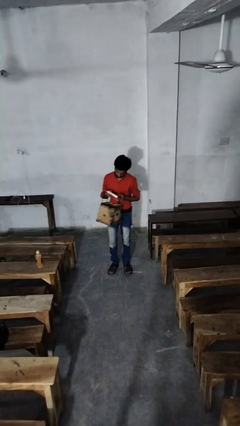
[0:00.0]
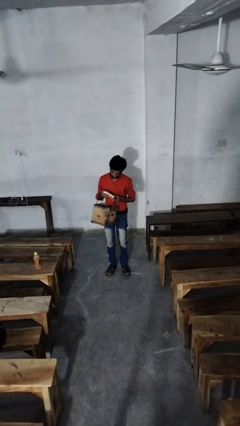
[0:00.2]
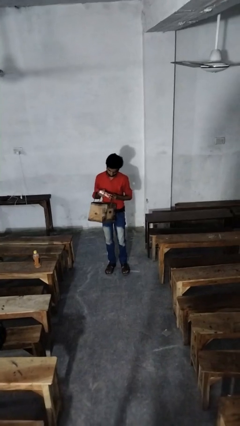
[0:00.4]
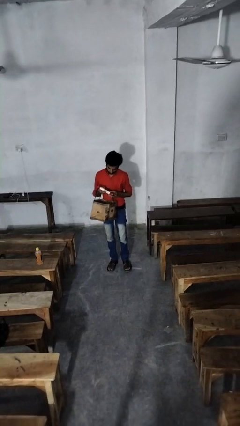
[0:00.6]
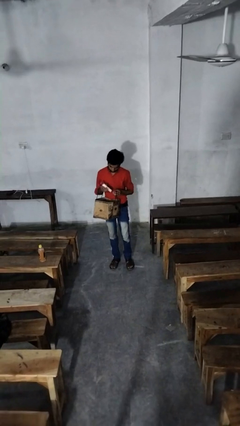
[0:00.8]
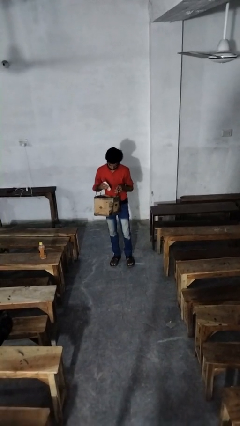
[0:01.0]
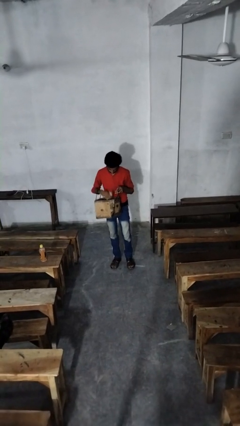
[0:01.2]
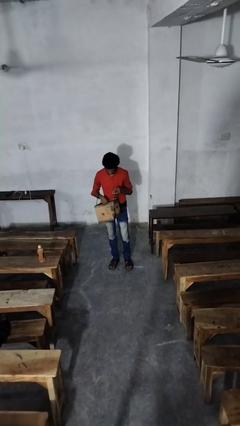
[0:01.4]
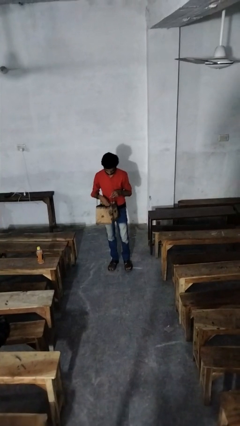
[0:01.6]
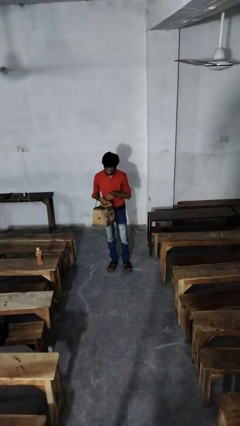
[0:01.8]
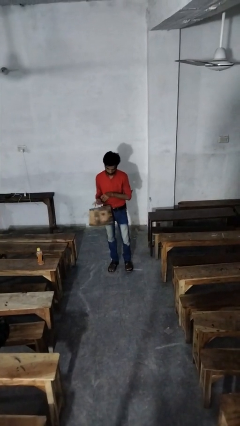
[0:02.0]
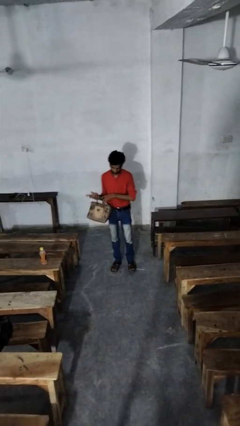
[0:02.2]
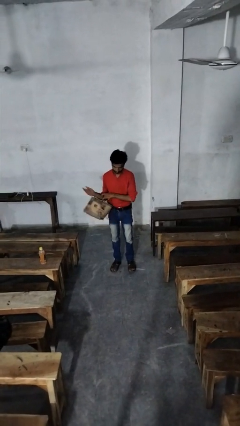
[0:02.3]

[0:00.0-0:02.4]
person puts object into purse

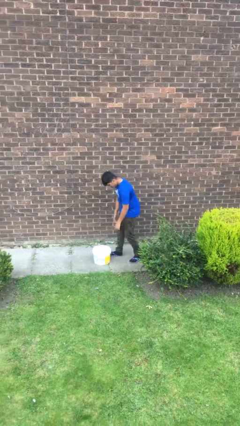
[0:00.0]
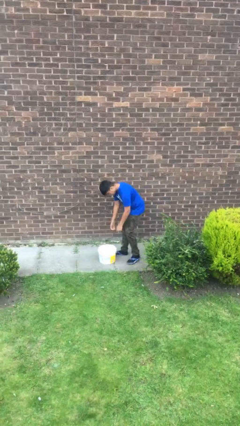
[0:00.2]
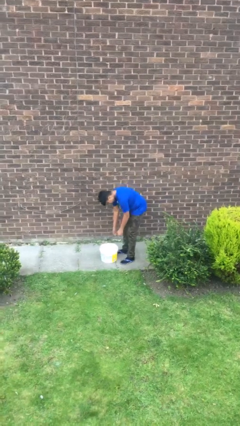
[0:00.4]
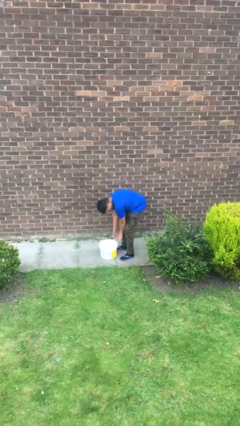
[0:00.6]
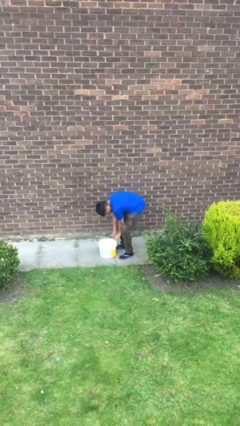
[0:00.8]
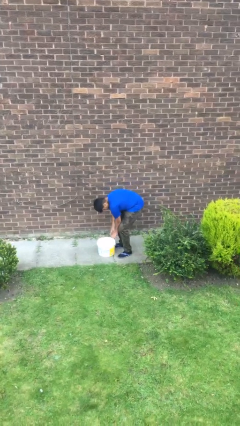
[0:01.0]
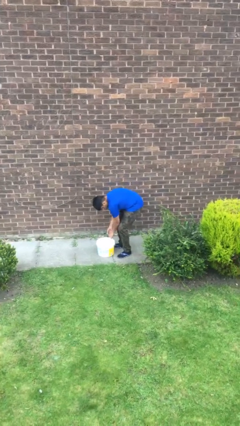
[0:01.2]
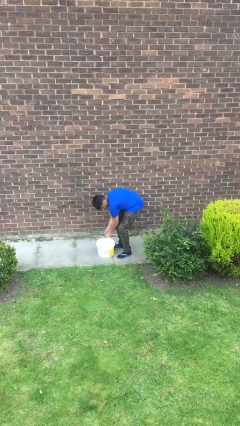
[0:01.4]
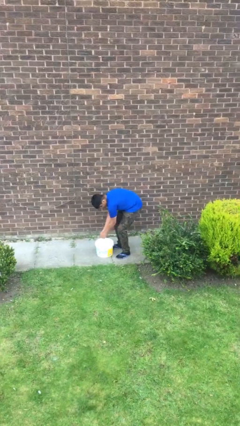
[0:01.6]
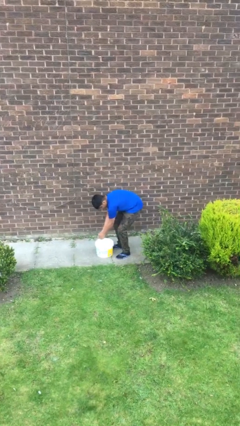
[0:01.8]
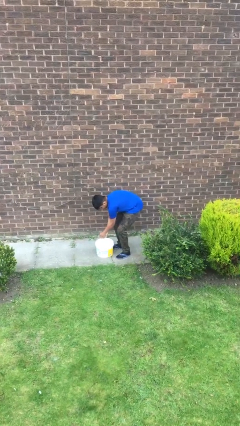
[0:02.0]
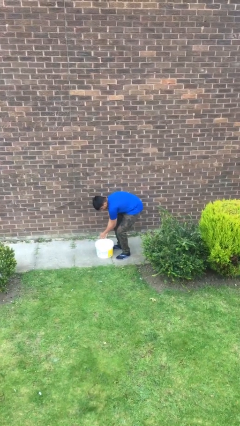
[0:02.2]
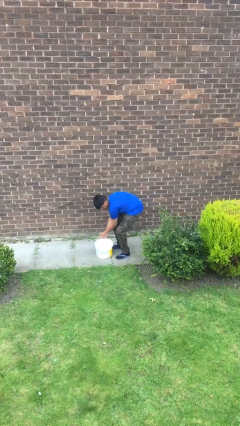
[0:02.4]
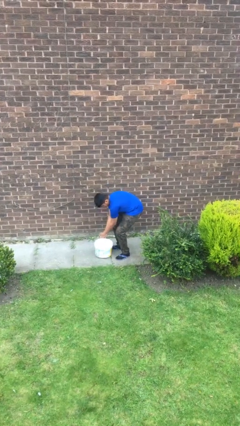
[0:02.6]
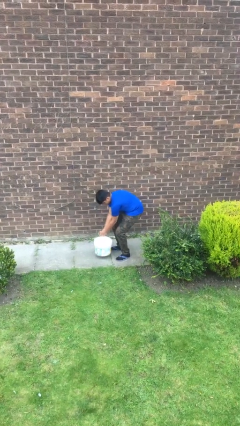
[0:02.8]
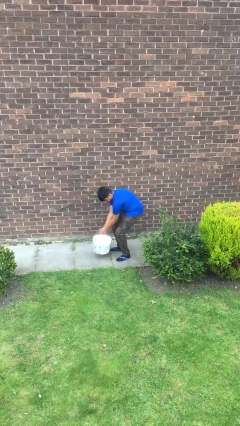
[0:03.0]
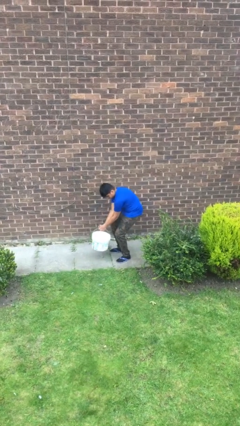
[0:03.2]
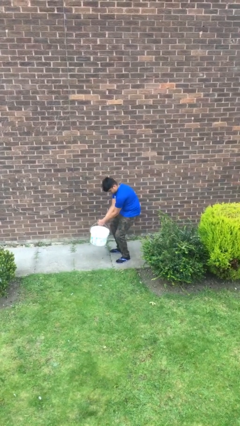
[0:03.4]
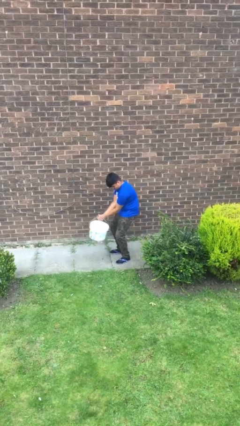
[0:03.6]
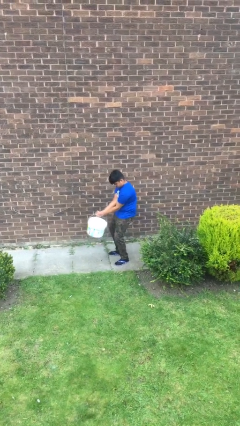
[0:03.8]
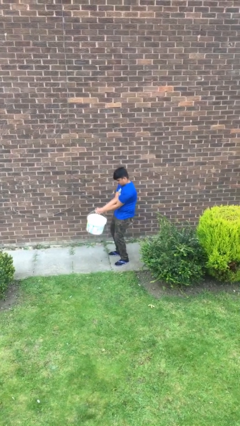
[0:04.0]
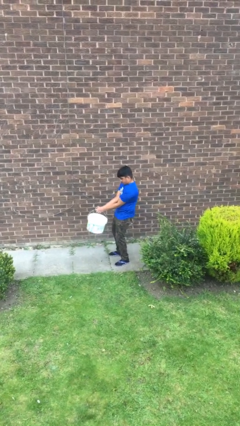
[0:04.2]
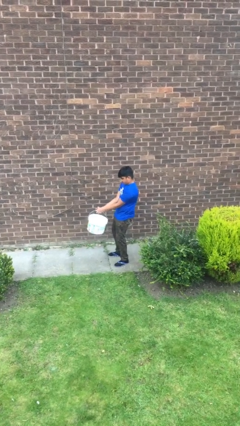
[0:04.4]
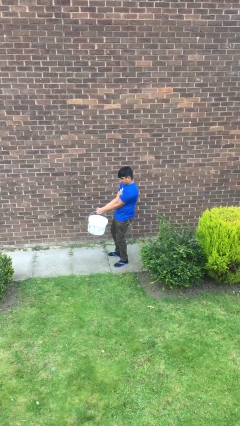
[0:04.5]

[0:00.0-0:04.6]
person picks up object from floor

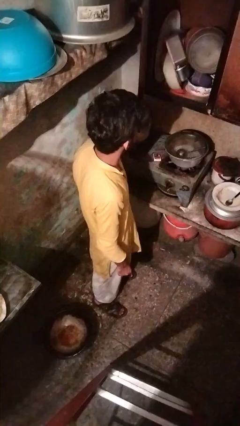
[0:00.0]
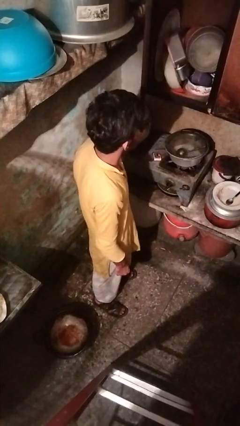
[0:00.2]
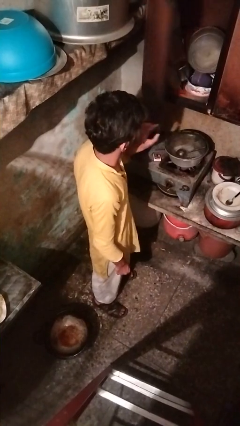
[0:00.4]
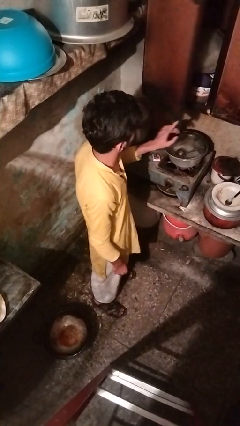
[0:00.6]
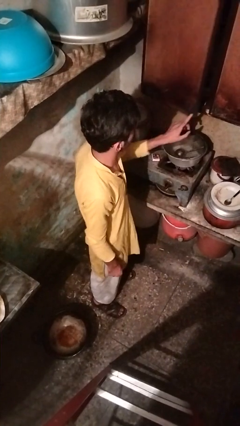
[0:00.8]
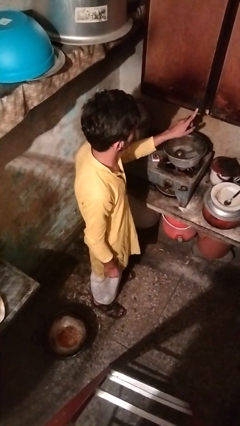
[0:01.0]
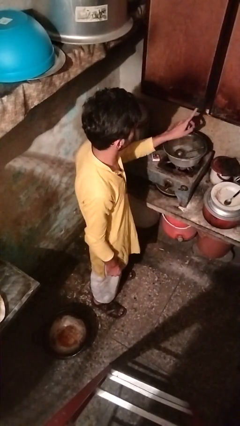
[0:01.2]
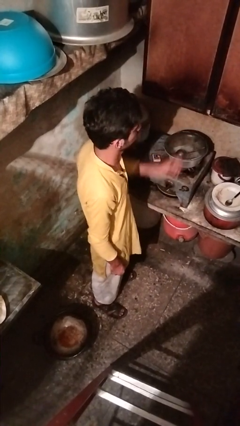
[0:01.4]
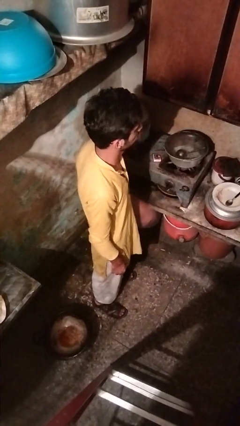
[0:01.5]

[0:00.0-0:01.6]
person closes cabinet

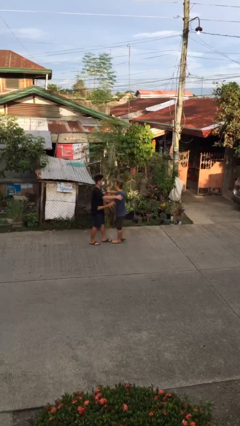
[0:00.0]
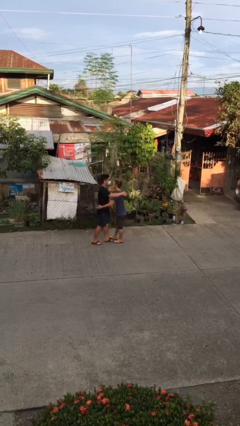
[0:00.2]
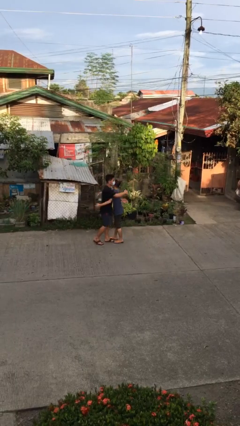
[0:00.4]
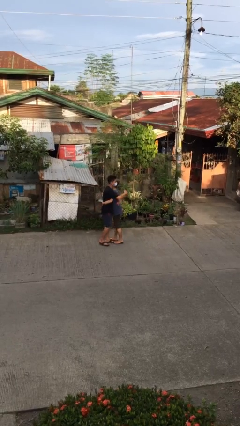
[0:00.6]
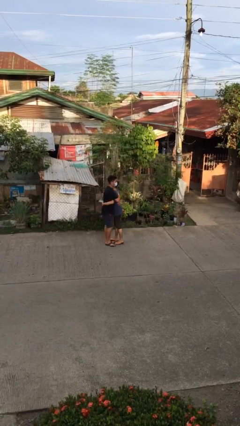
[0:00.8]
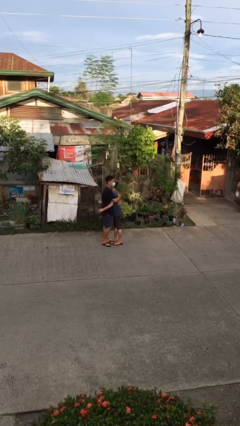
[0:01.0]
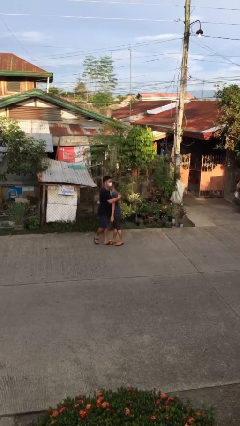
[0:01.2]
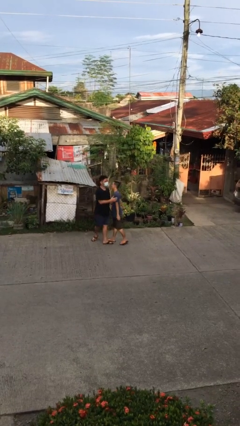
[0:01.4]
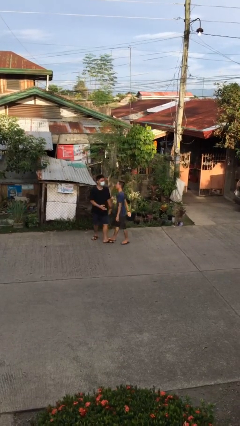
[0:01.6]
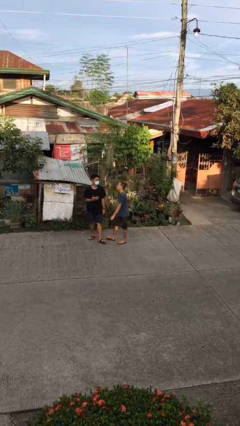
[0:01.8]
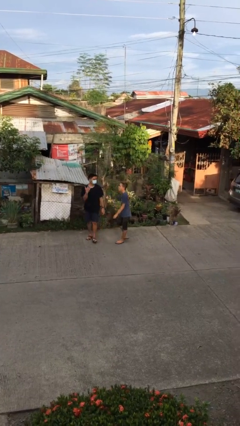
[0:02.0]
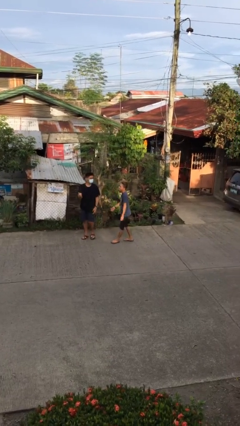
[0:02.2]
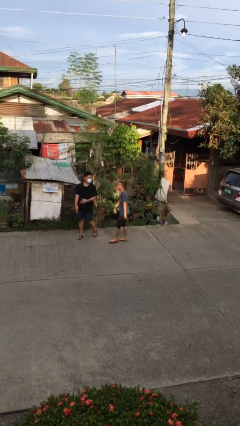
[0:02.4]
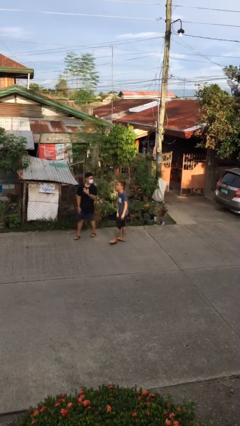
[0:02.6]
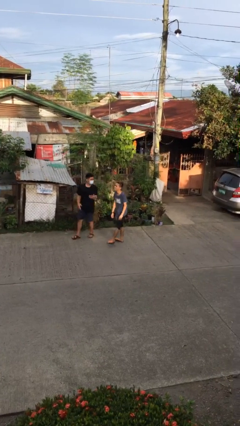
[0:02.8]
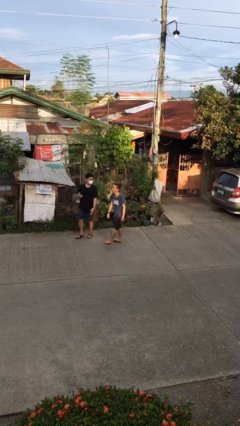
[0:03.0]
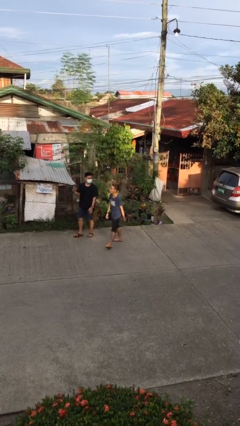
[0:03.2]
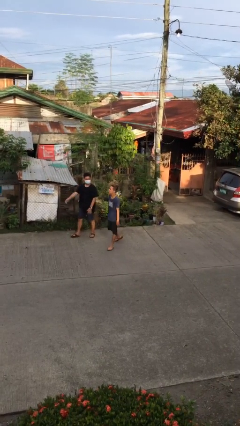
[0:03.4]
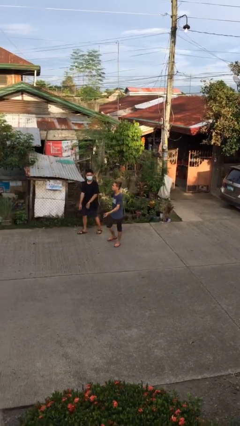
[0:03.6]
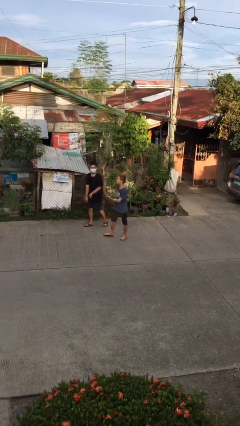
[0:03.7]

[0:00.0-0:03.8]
person embraces person

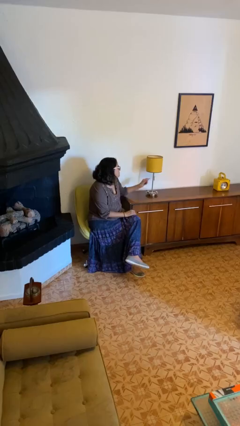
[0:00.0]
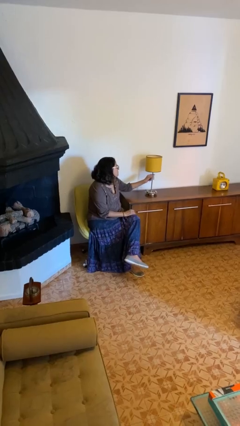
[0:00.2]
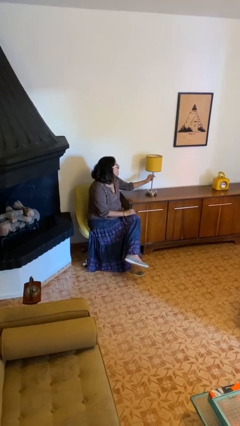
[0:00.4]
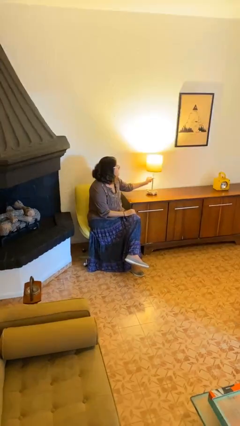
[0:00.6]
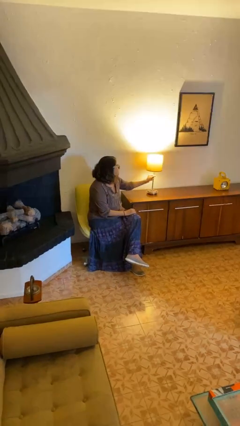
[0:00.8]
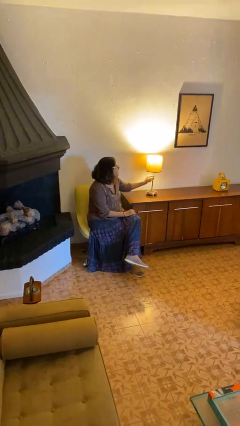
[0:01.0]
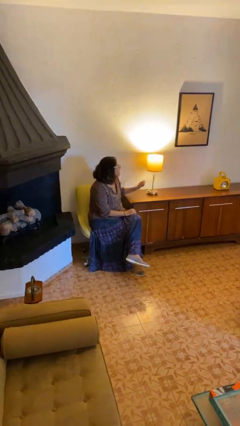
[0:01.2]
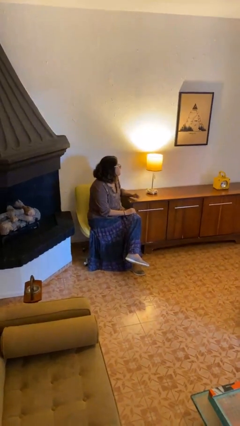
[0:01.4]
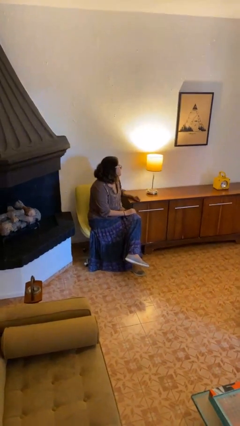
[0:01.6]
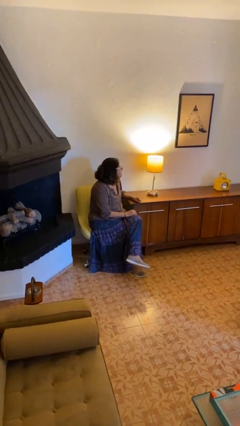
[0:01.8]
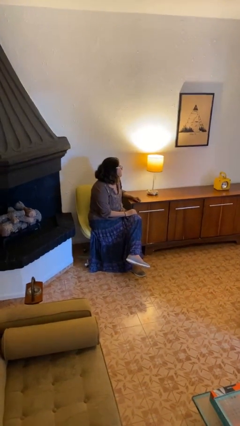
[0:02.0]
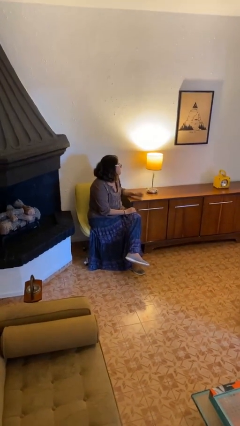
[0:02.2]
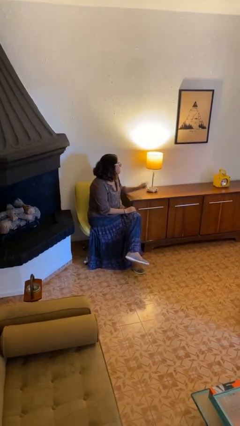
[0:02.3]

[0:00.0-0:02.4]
person turns on lamp

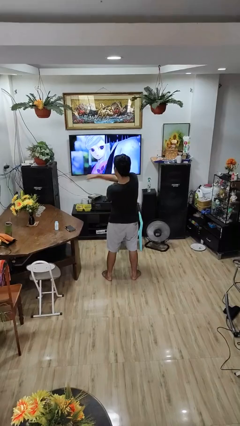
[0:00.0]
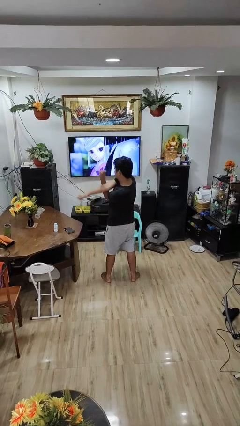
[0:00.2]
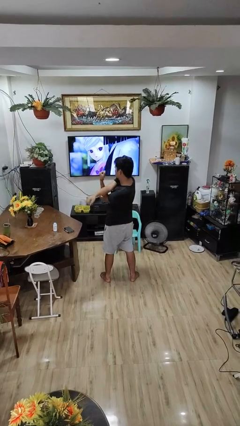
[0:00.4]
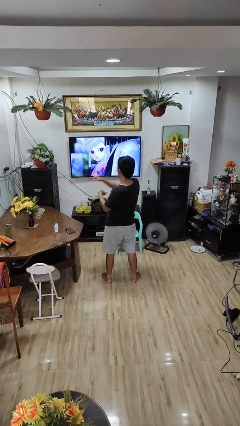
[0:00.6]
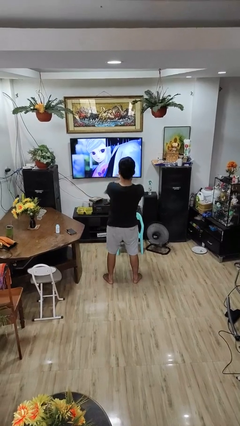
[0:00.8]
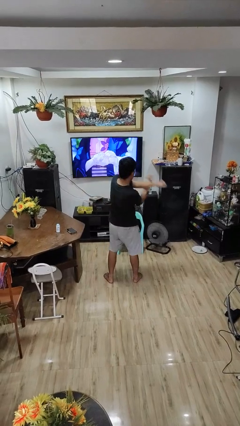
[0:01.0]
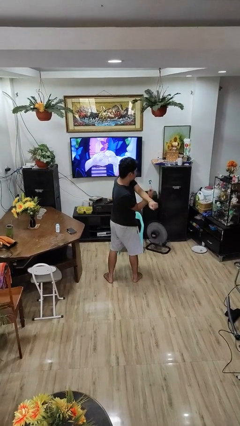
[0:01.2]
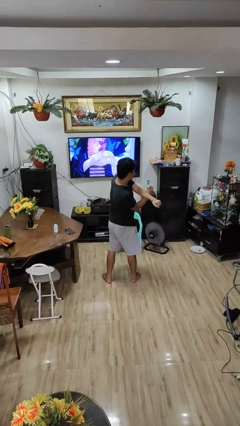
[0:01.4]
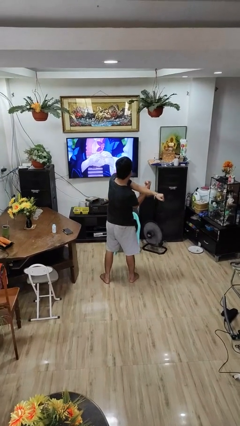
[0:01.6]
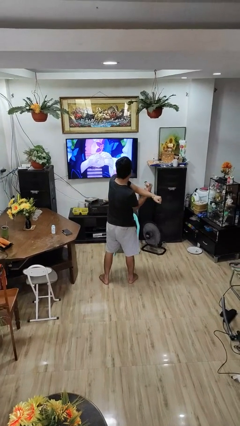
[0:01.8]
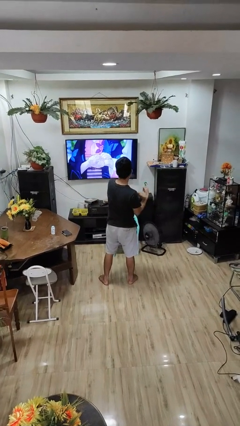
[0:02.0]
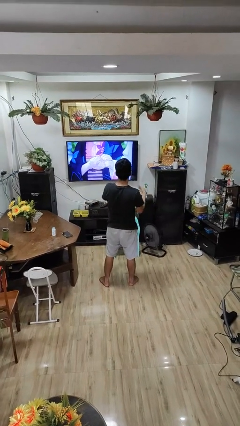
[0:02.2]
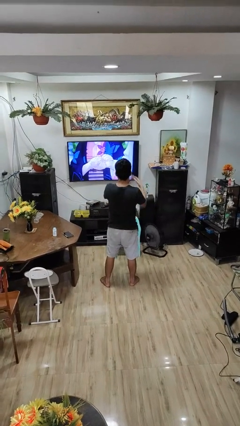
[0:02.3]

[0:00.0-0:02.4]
person stretches arms to side

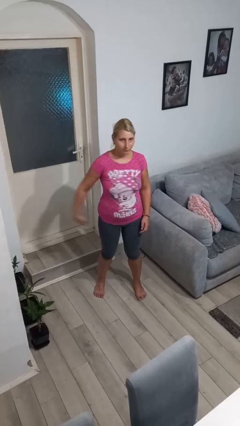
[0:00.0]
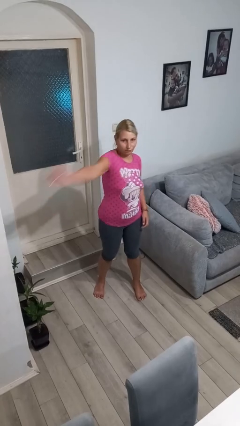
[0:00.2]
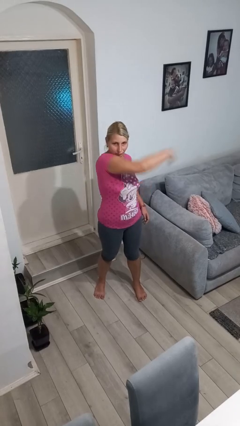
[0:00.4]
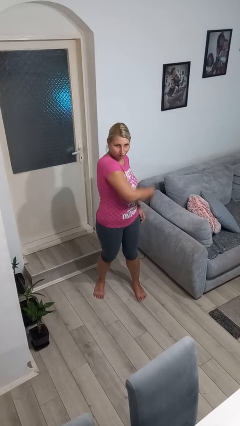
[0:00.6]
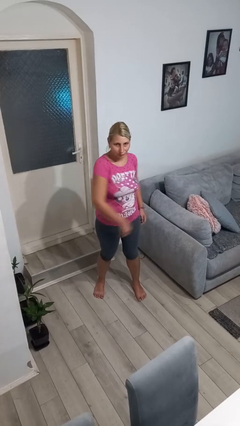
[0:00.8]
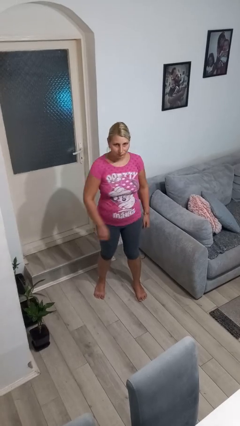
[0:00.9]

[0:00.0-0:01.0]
person punches
